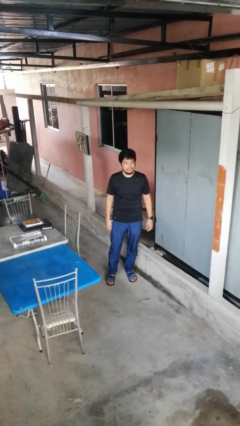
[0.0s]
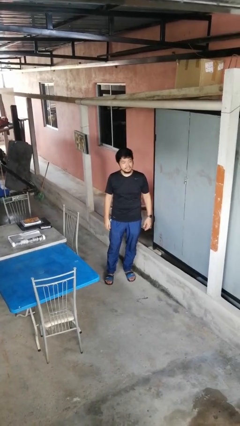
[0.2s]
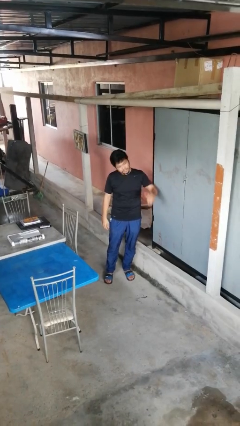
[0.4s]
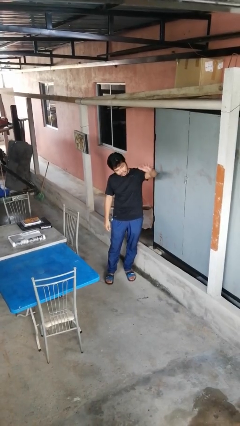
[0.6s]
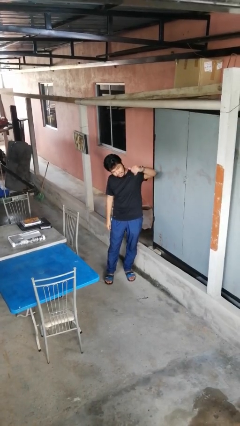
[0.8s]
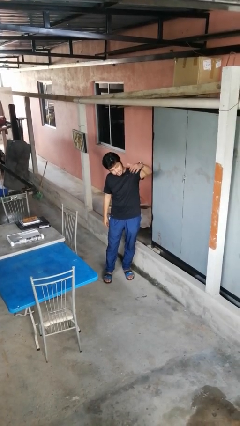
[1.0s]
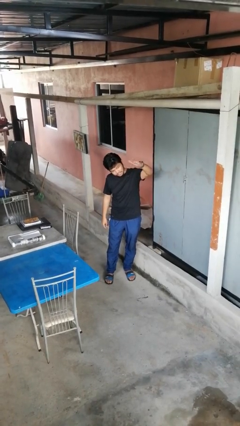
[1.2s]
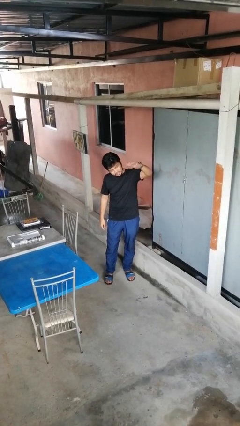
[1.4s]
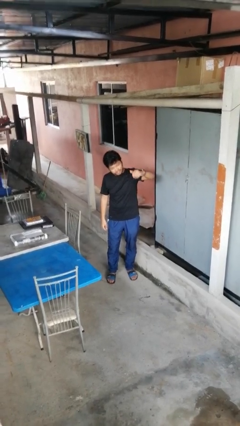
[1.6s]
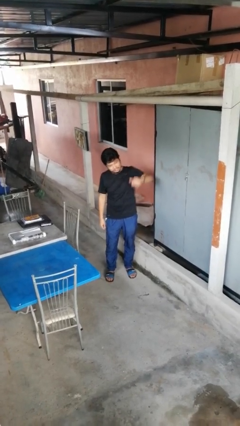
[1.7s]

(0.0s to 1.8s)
person gestures come here

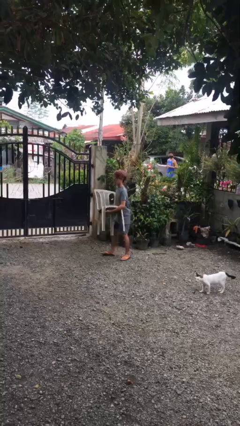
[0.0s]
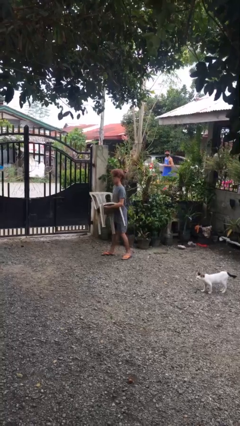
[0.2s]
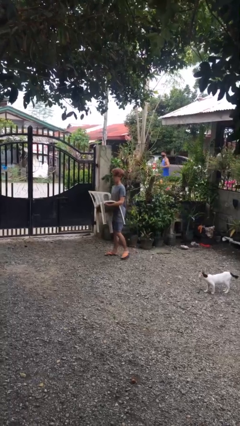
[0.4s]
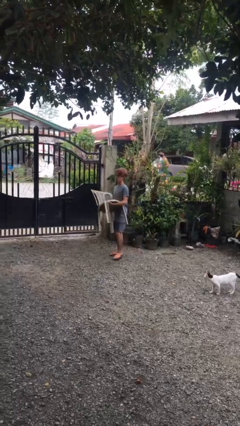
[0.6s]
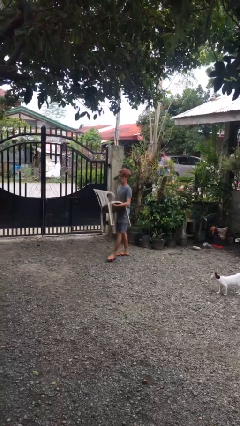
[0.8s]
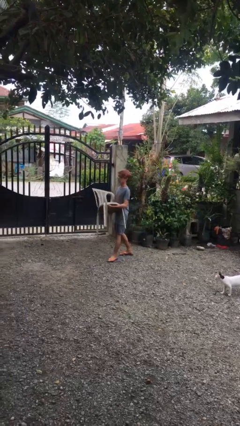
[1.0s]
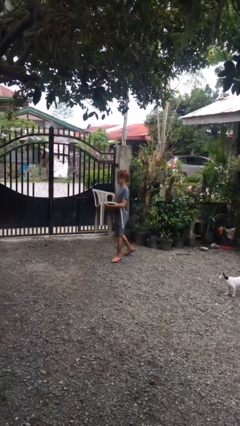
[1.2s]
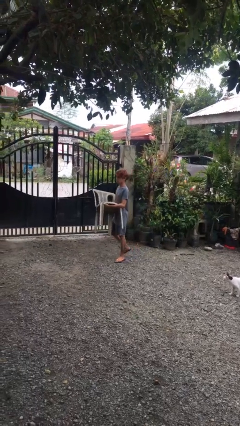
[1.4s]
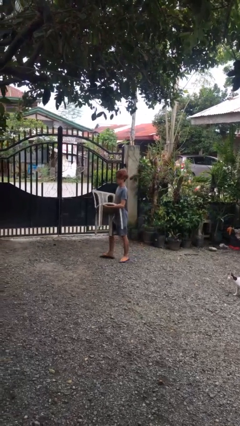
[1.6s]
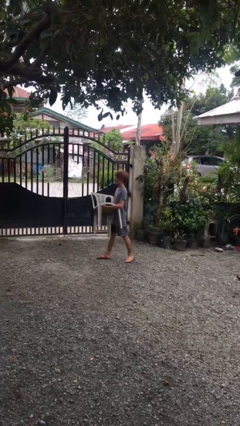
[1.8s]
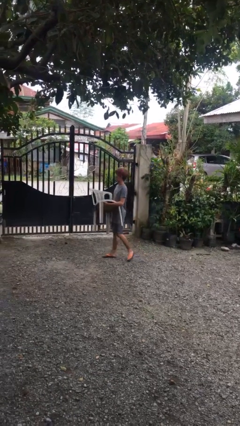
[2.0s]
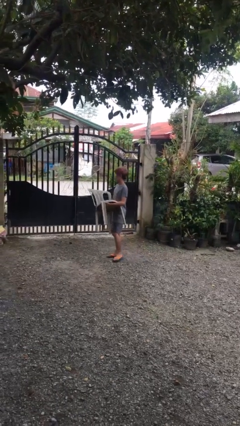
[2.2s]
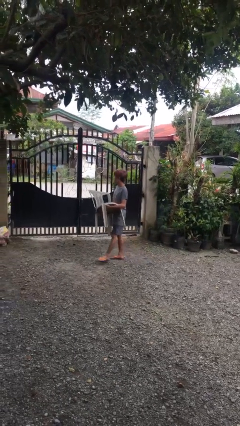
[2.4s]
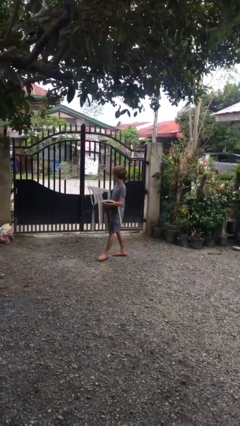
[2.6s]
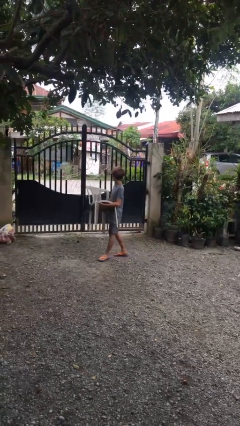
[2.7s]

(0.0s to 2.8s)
person carries heavy object

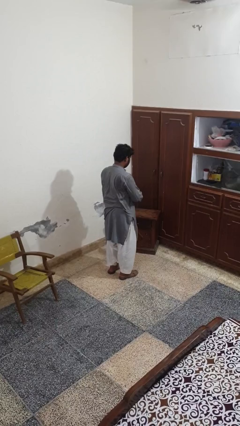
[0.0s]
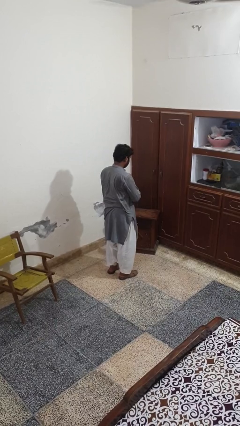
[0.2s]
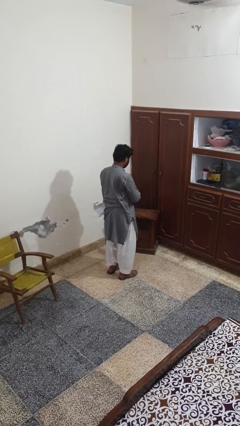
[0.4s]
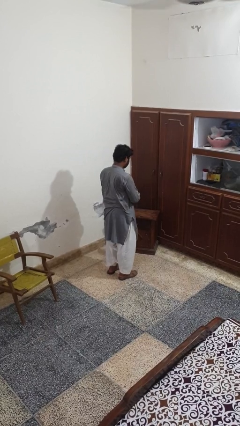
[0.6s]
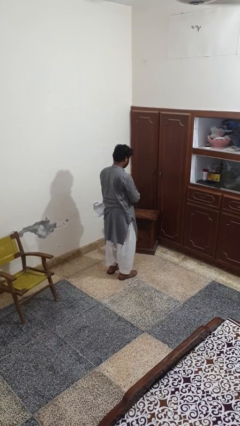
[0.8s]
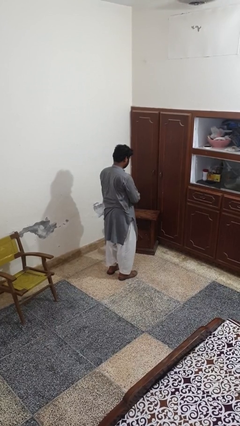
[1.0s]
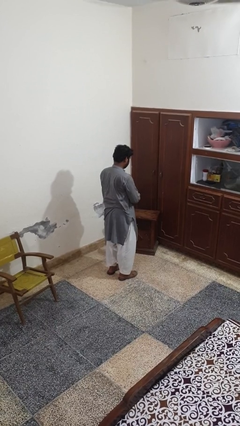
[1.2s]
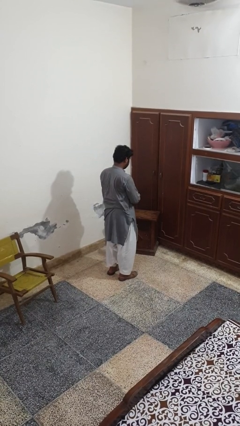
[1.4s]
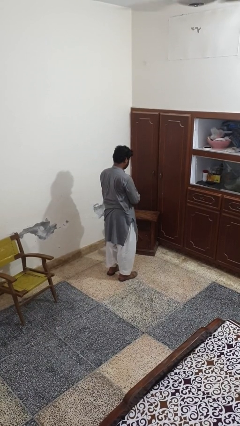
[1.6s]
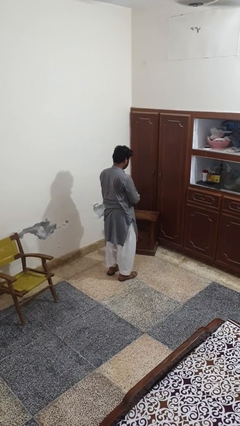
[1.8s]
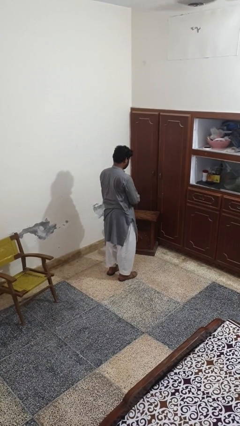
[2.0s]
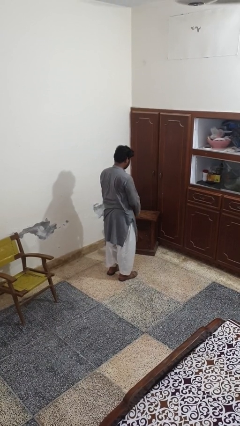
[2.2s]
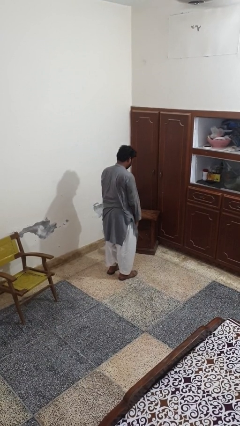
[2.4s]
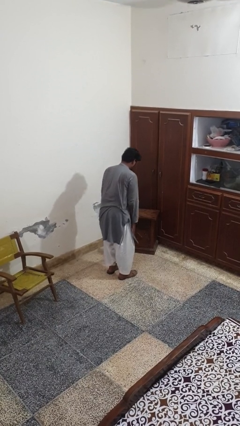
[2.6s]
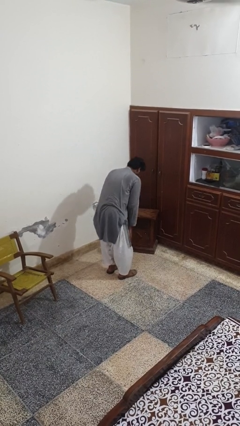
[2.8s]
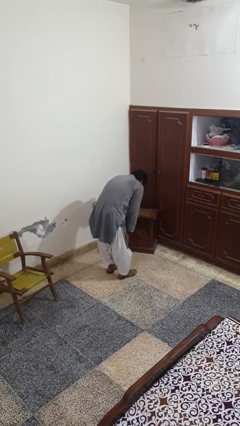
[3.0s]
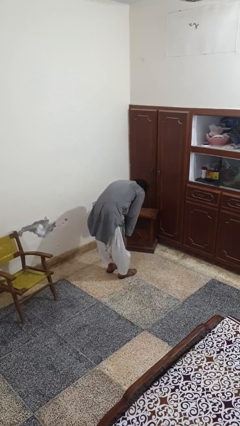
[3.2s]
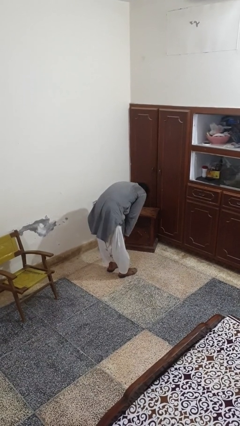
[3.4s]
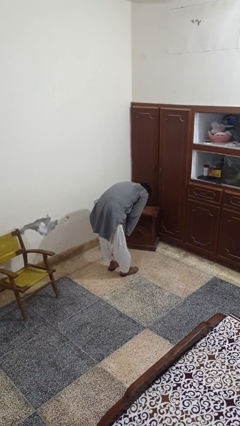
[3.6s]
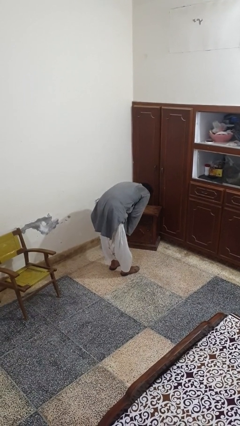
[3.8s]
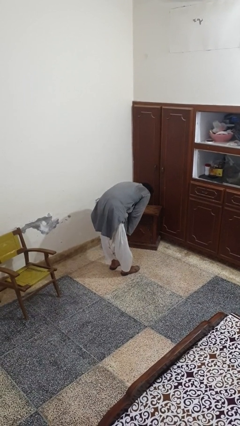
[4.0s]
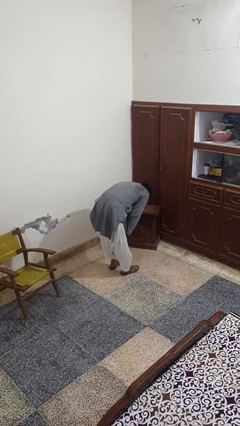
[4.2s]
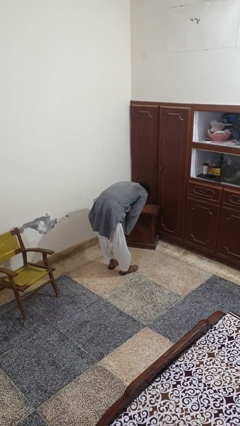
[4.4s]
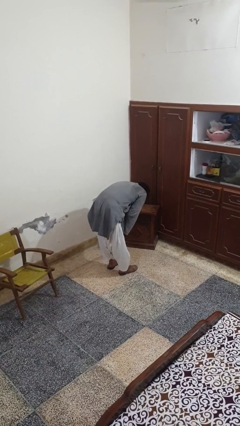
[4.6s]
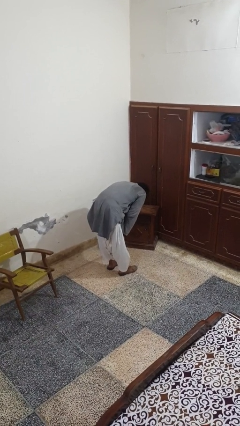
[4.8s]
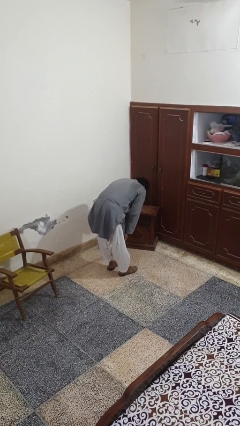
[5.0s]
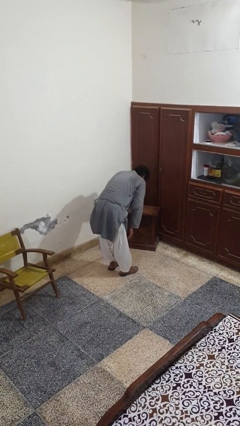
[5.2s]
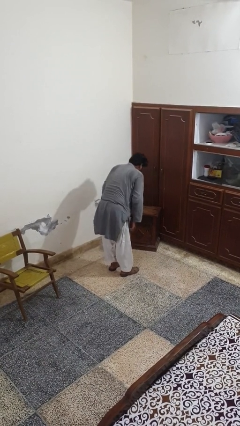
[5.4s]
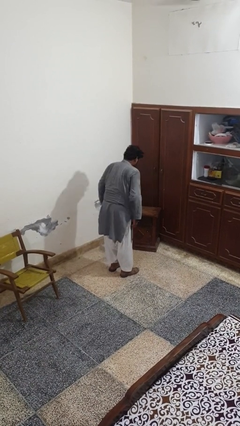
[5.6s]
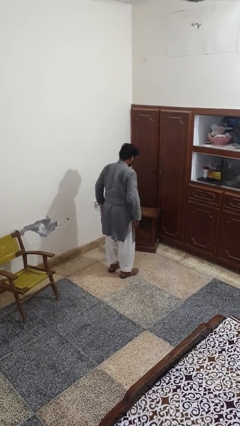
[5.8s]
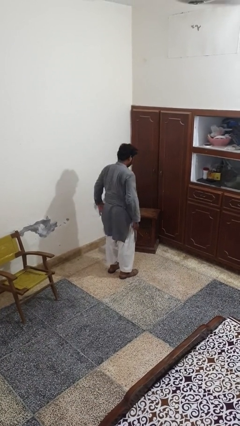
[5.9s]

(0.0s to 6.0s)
person prays

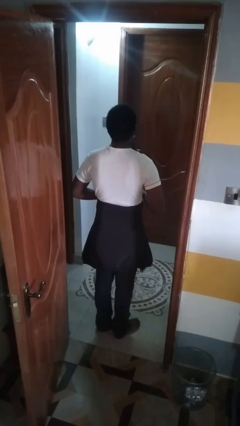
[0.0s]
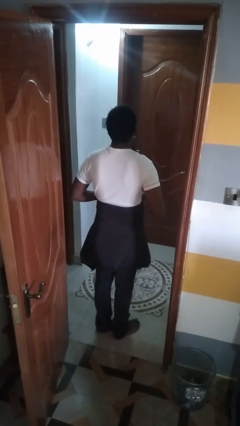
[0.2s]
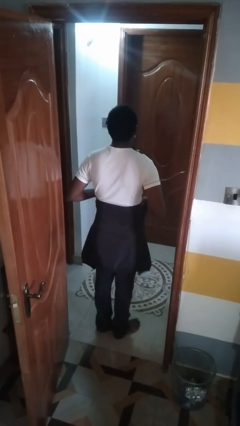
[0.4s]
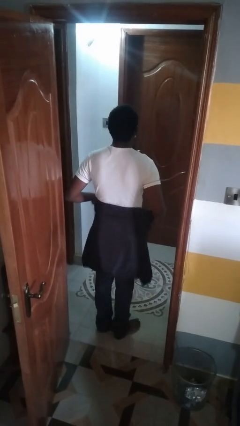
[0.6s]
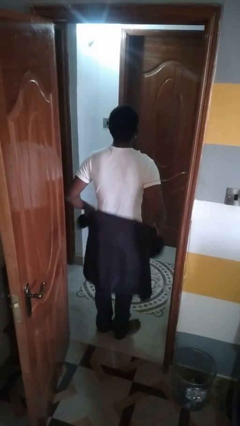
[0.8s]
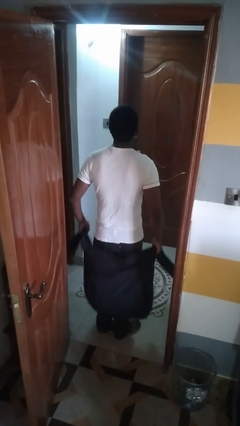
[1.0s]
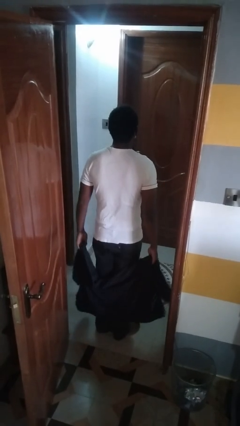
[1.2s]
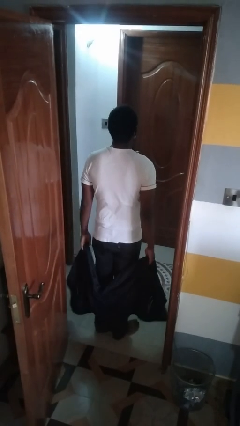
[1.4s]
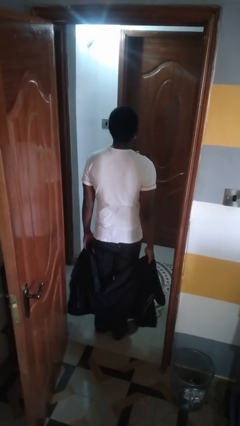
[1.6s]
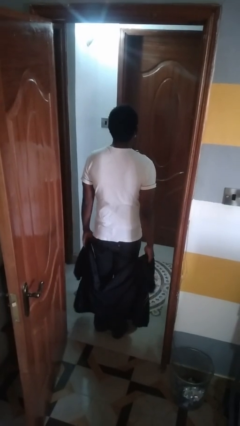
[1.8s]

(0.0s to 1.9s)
person unties jacket around waist

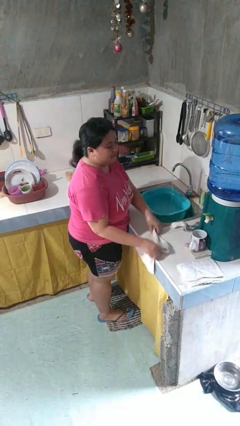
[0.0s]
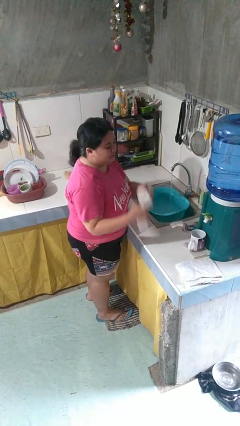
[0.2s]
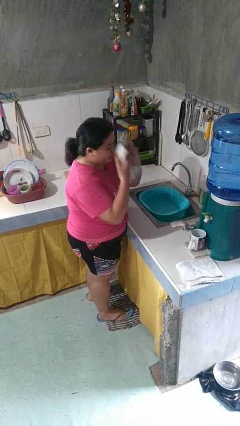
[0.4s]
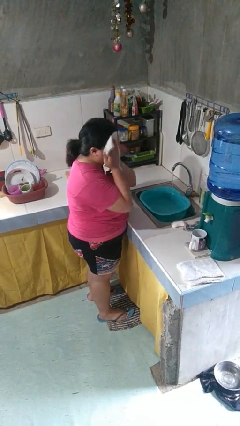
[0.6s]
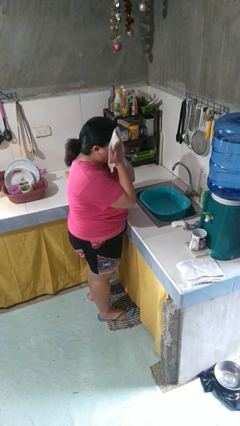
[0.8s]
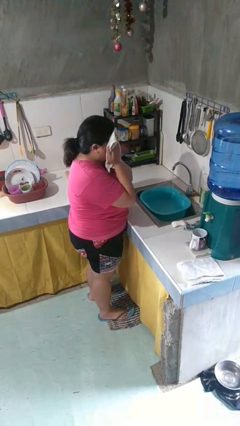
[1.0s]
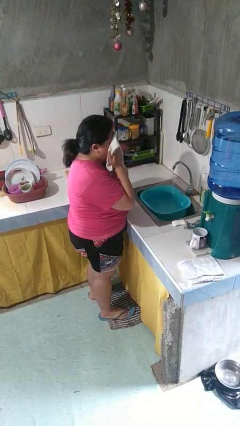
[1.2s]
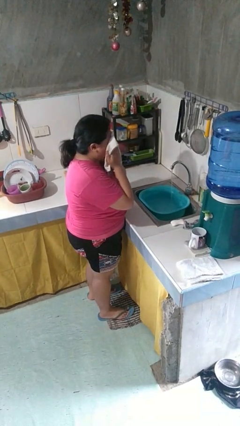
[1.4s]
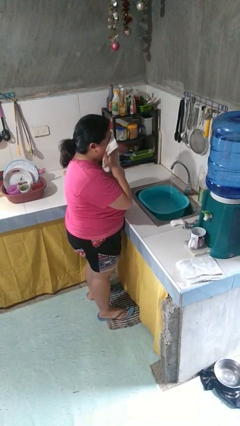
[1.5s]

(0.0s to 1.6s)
person dries face with towel

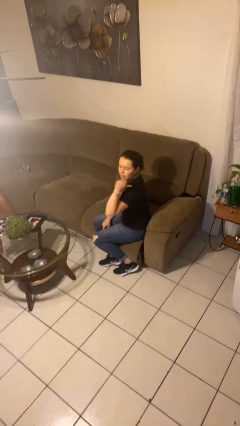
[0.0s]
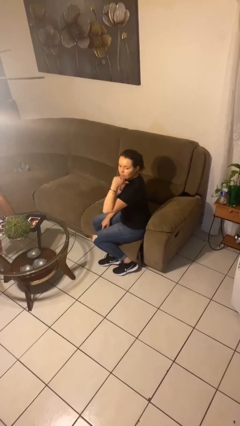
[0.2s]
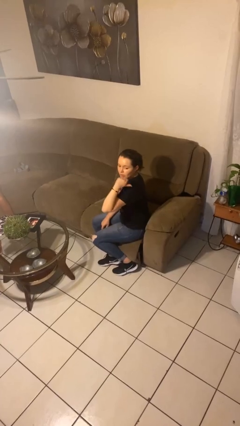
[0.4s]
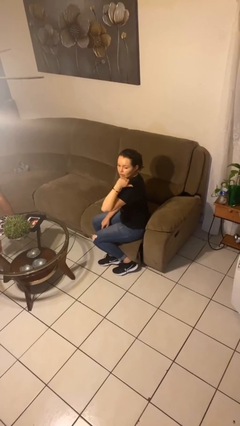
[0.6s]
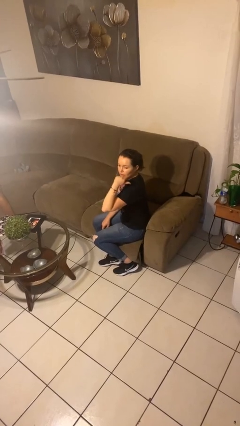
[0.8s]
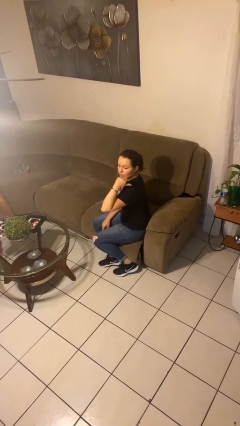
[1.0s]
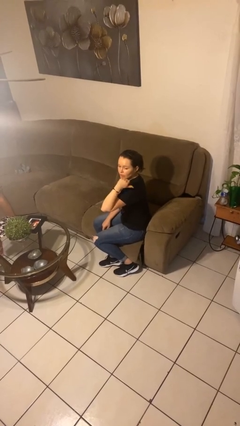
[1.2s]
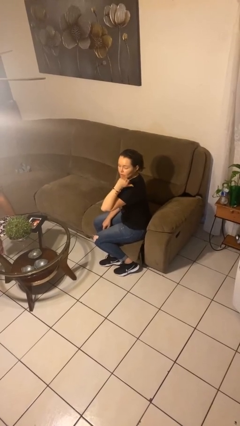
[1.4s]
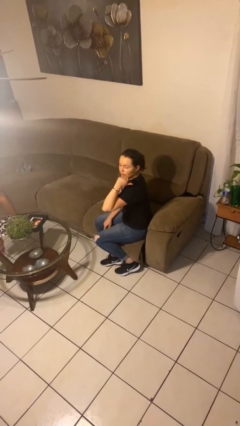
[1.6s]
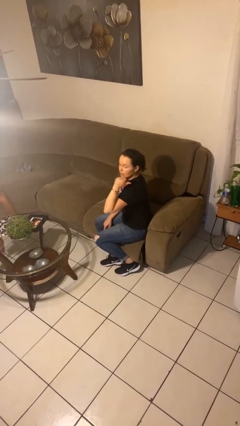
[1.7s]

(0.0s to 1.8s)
person gestures behind me

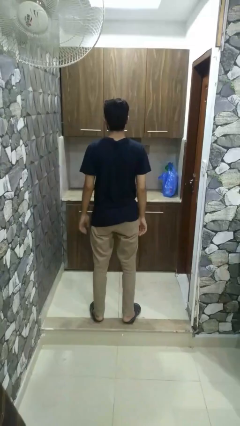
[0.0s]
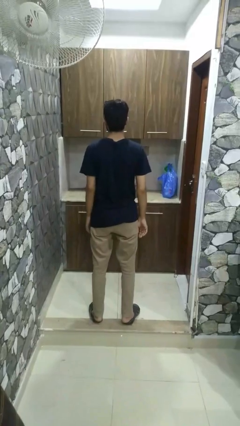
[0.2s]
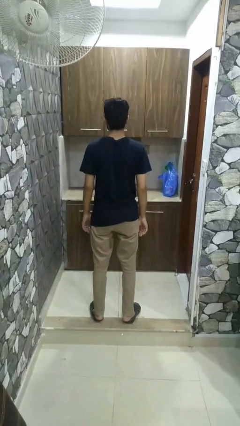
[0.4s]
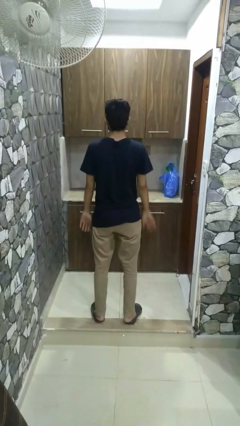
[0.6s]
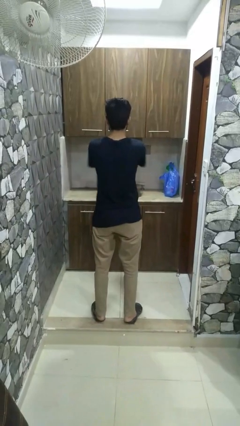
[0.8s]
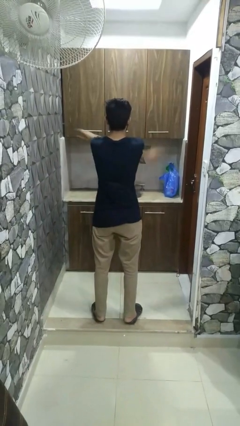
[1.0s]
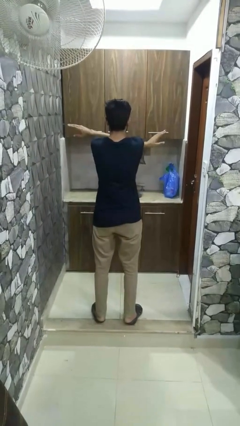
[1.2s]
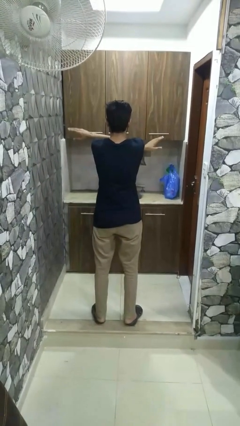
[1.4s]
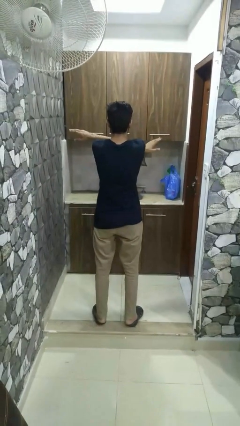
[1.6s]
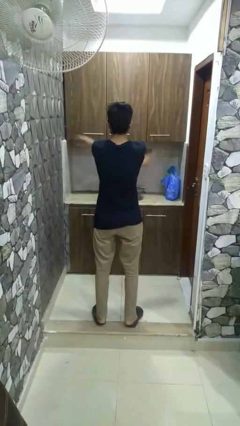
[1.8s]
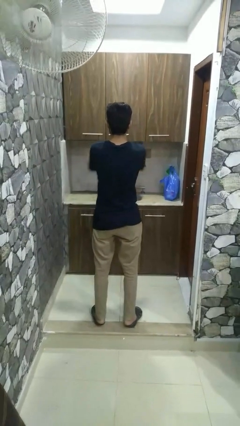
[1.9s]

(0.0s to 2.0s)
person crosses arms
